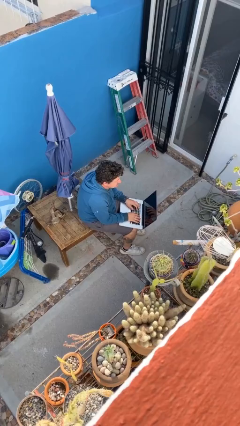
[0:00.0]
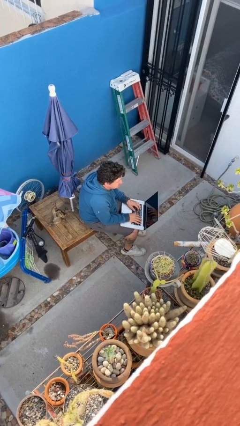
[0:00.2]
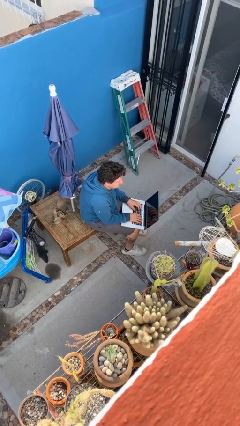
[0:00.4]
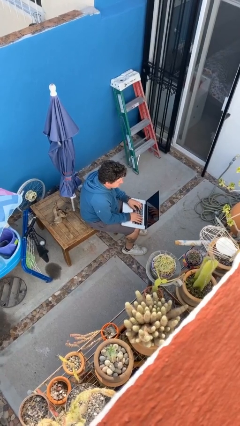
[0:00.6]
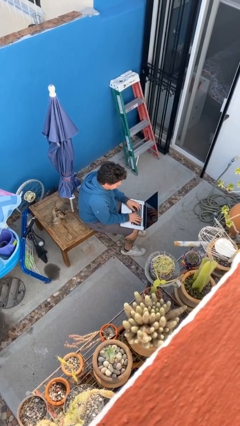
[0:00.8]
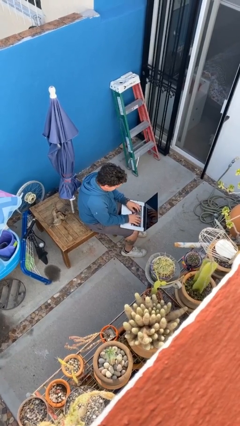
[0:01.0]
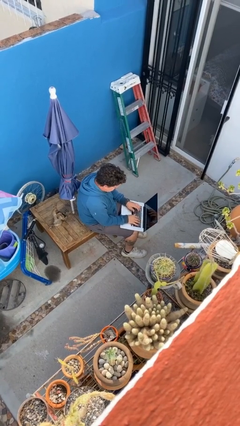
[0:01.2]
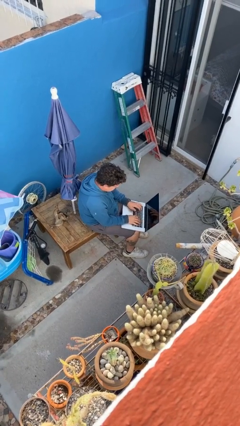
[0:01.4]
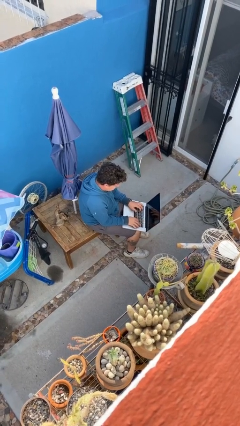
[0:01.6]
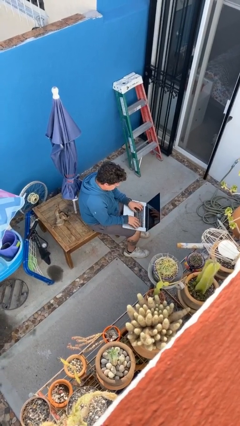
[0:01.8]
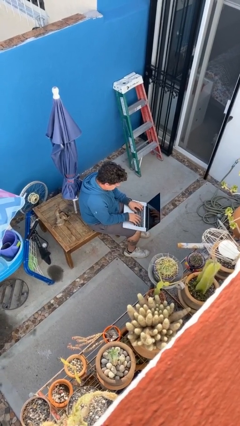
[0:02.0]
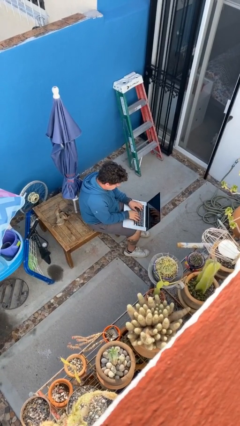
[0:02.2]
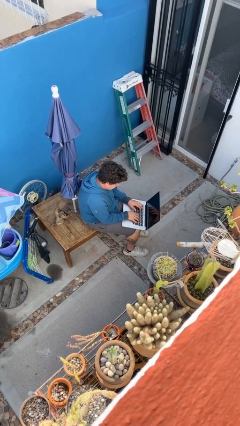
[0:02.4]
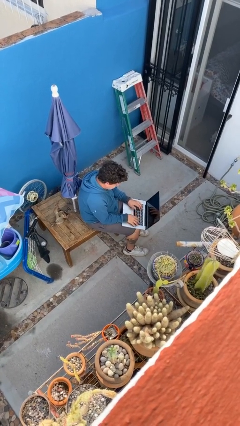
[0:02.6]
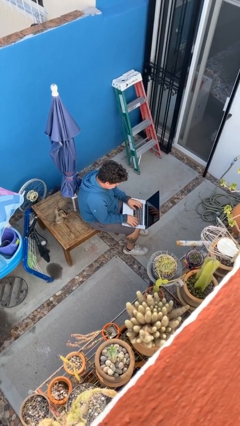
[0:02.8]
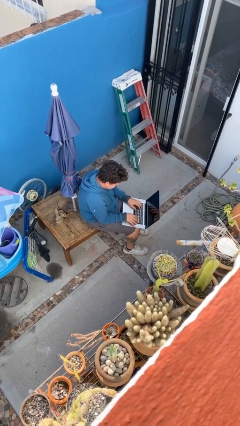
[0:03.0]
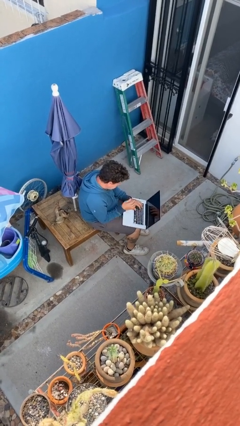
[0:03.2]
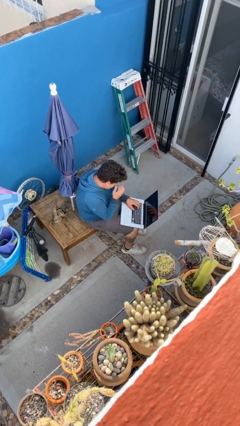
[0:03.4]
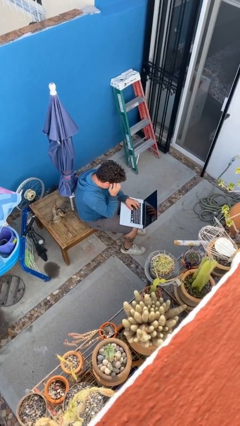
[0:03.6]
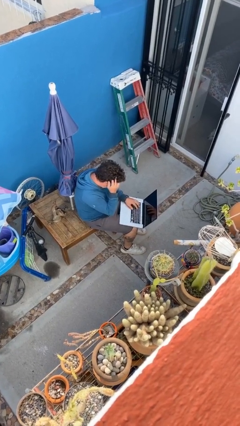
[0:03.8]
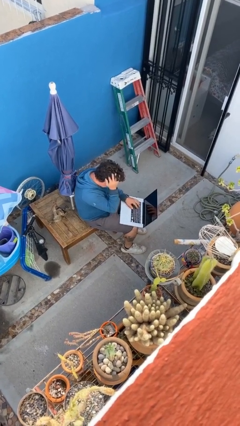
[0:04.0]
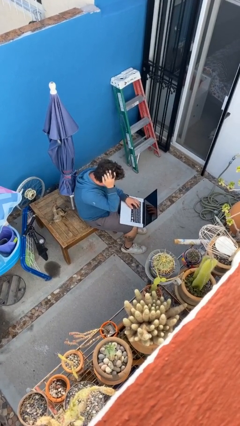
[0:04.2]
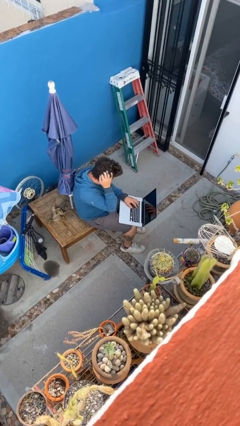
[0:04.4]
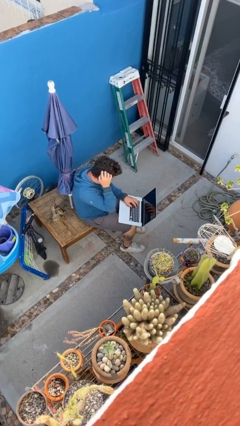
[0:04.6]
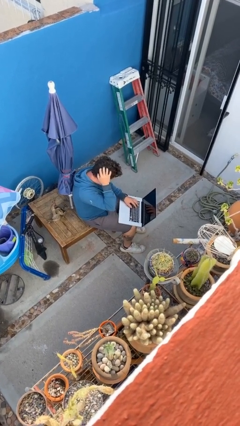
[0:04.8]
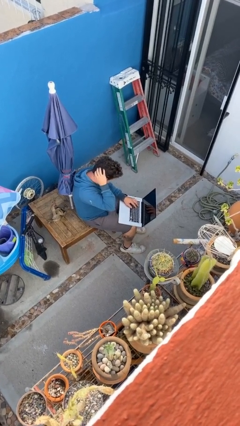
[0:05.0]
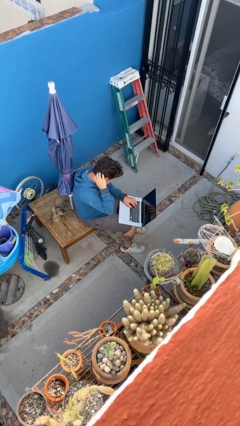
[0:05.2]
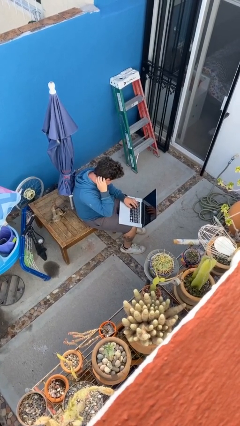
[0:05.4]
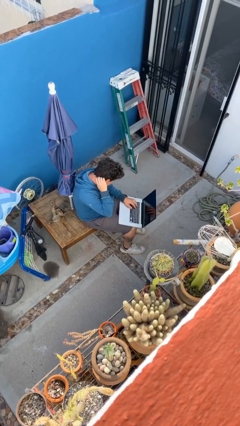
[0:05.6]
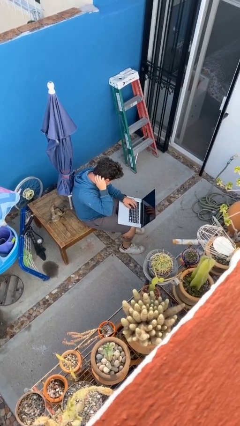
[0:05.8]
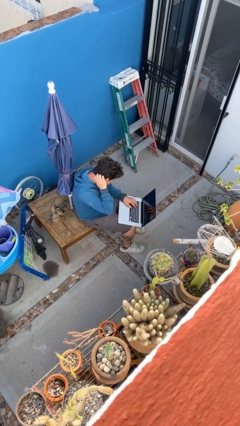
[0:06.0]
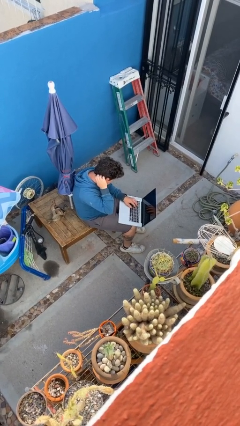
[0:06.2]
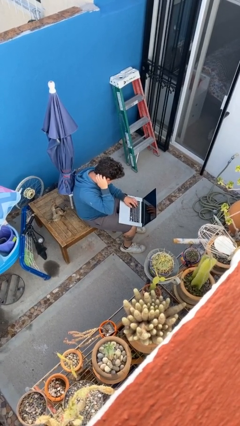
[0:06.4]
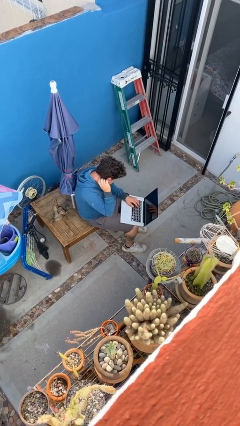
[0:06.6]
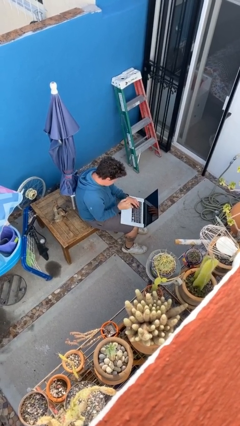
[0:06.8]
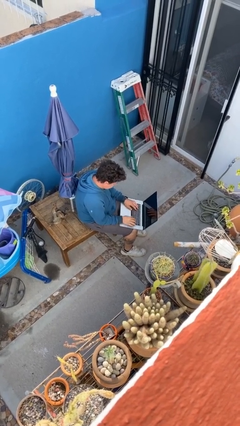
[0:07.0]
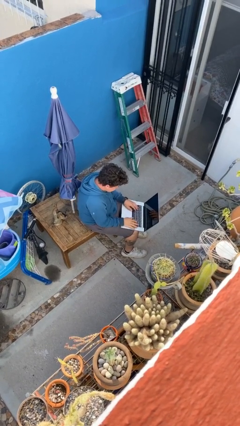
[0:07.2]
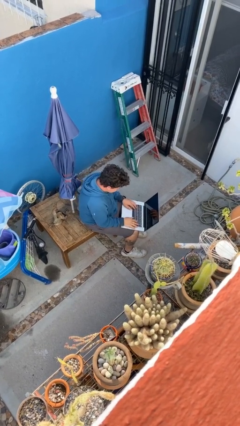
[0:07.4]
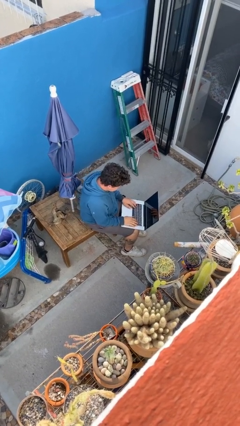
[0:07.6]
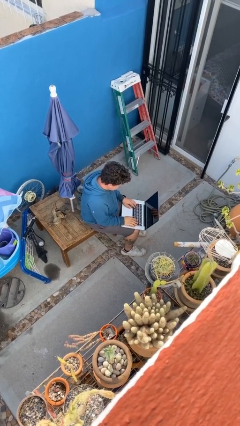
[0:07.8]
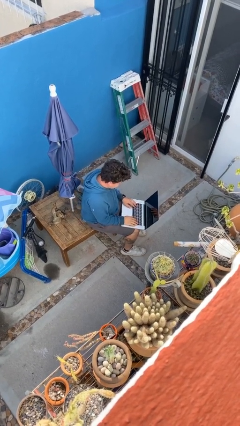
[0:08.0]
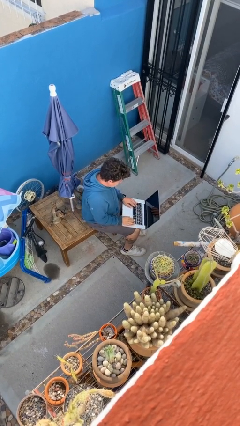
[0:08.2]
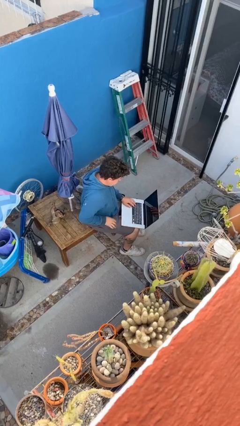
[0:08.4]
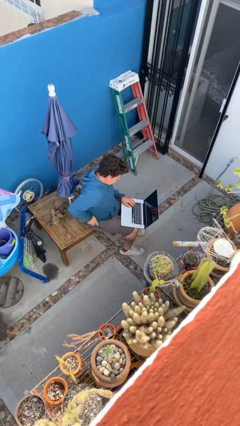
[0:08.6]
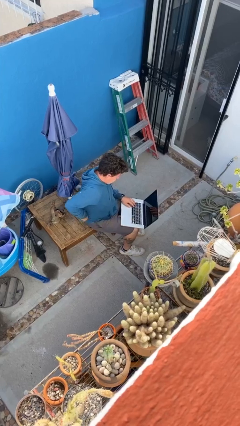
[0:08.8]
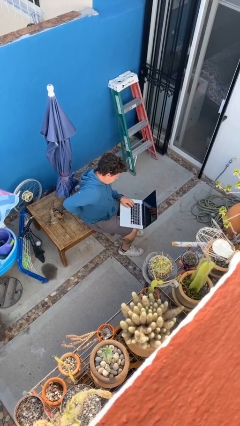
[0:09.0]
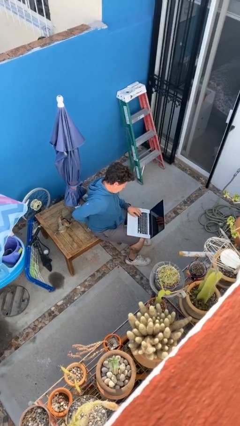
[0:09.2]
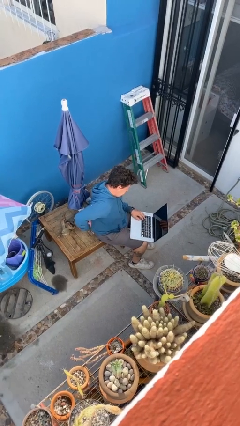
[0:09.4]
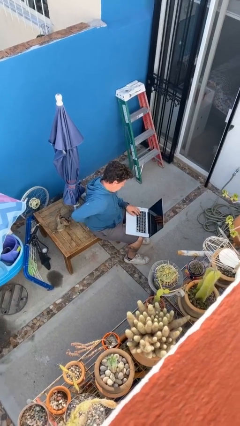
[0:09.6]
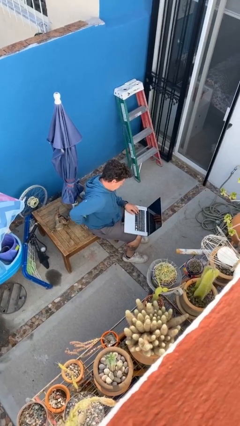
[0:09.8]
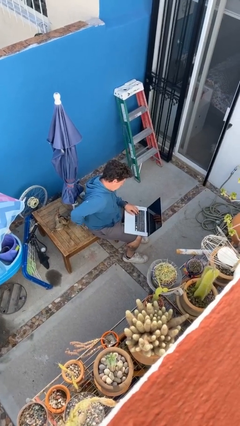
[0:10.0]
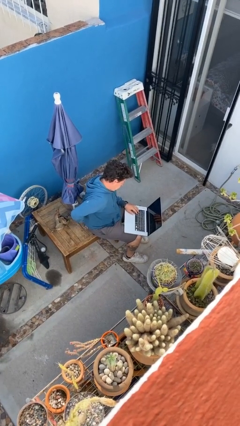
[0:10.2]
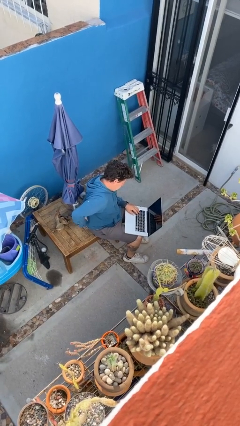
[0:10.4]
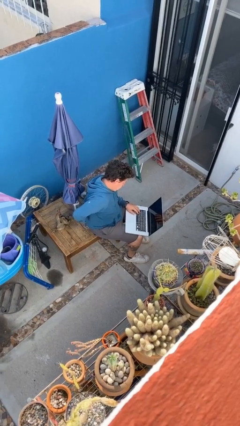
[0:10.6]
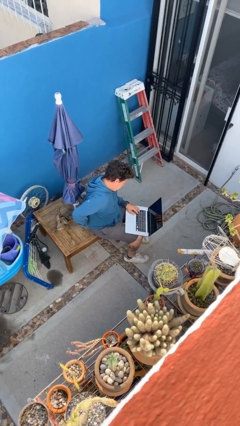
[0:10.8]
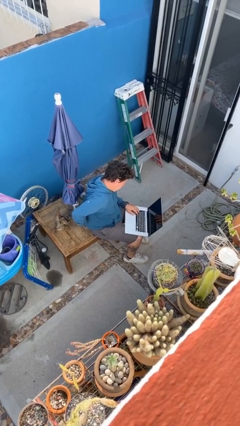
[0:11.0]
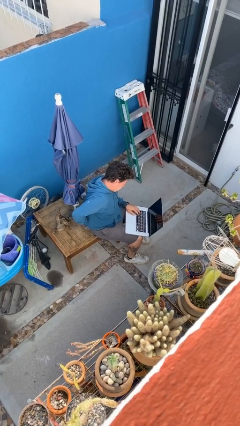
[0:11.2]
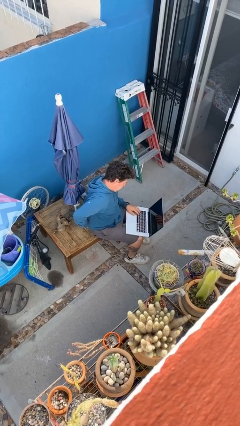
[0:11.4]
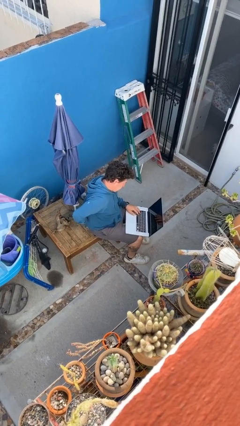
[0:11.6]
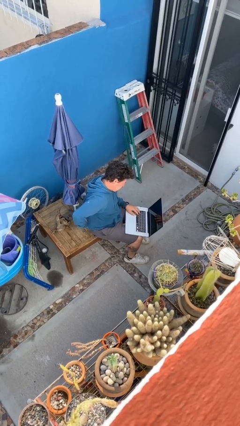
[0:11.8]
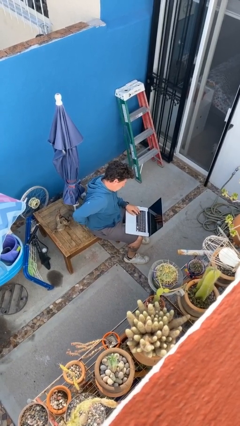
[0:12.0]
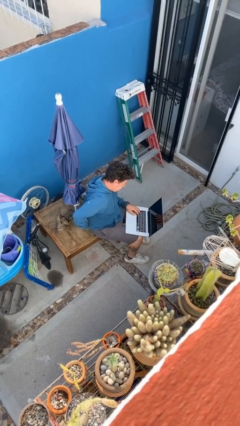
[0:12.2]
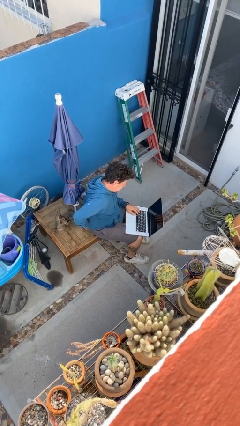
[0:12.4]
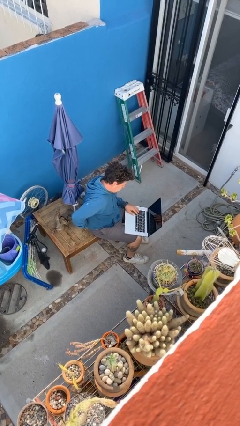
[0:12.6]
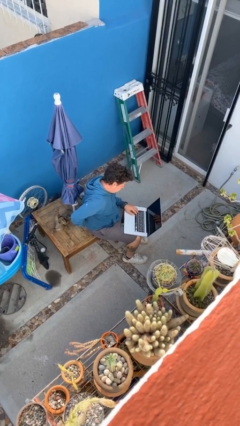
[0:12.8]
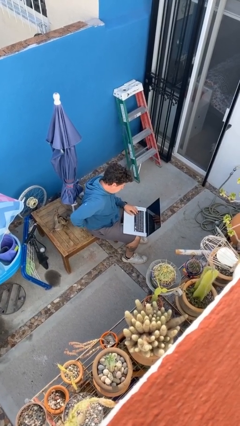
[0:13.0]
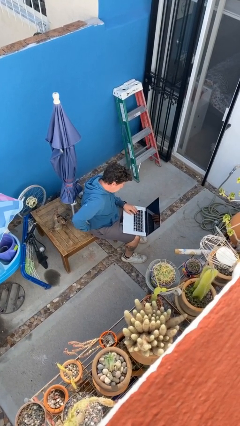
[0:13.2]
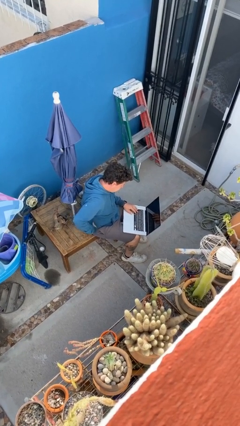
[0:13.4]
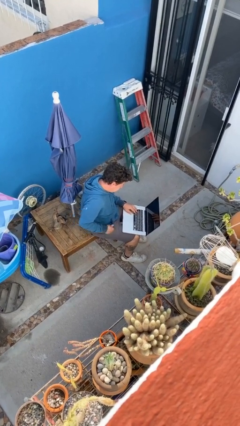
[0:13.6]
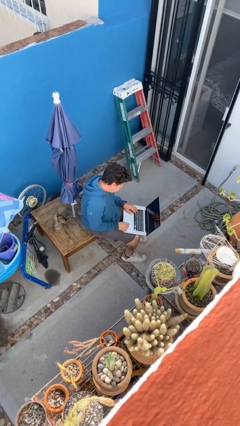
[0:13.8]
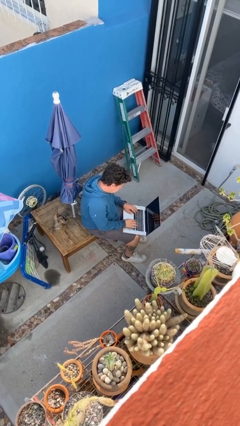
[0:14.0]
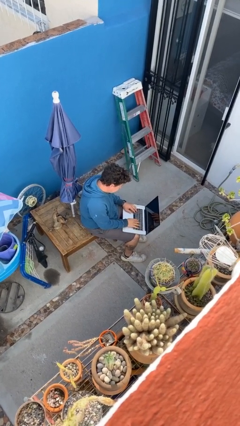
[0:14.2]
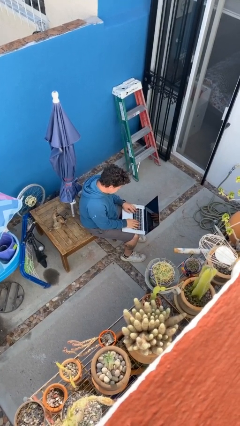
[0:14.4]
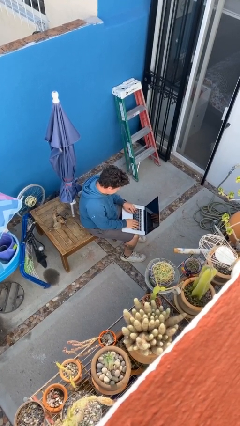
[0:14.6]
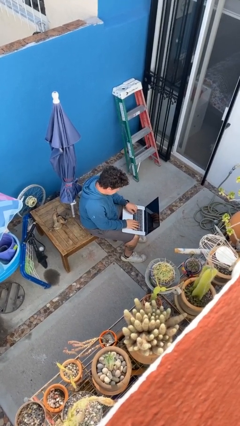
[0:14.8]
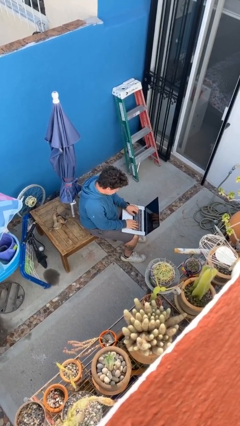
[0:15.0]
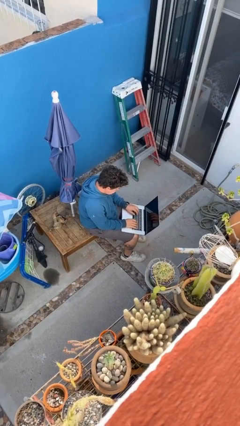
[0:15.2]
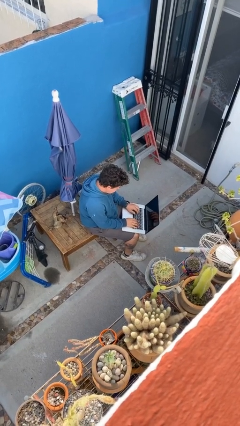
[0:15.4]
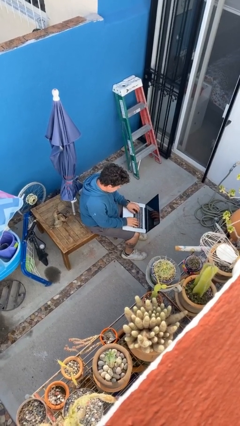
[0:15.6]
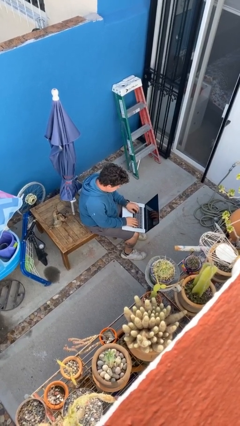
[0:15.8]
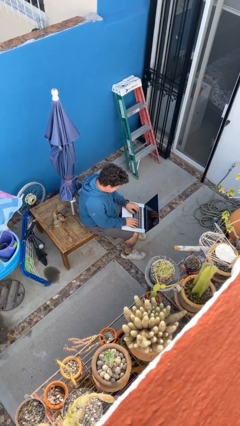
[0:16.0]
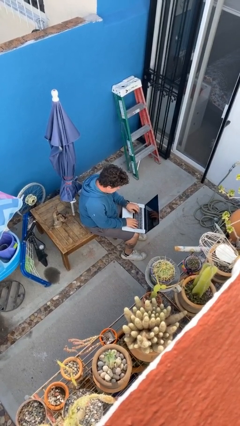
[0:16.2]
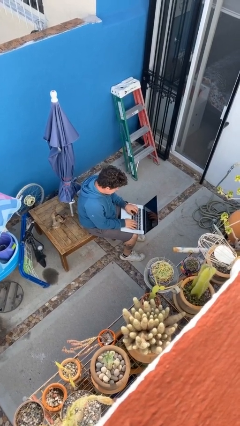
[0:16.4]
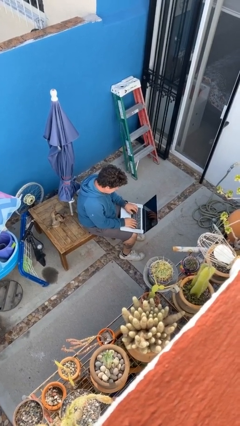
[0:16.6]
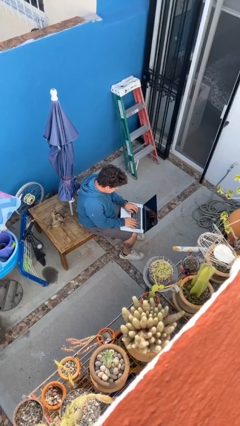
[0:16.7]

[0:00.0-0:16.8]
person interacts with laptop

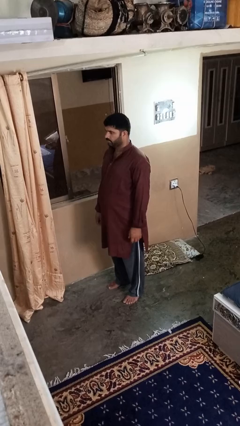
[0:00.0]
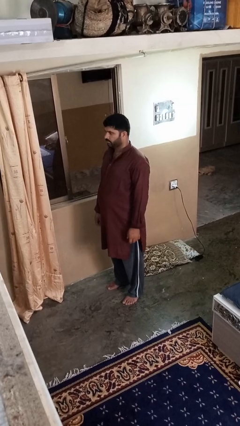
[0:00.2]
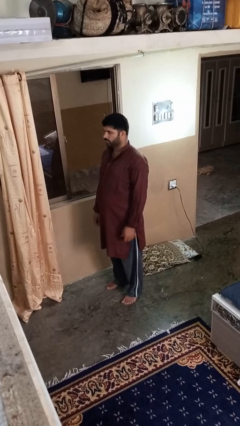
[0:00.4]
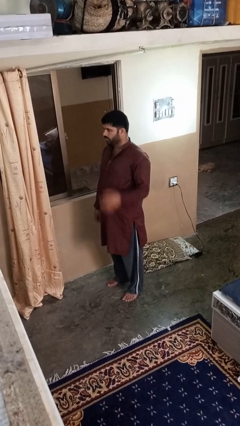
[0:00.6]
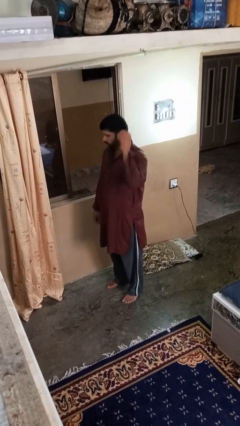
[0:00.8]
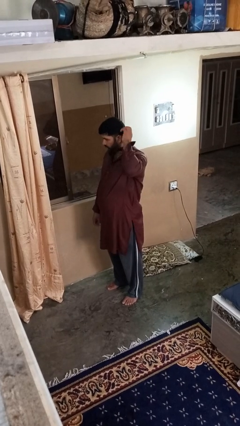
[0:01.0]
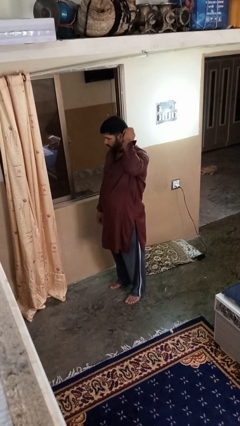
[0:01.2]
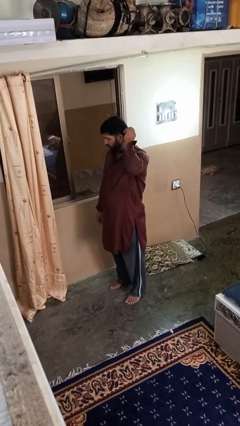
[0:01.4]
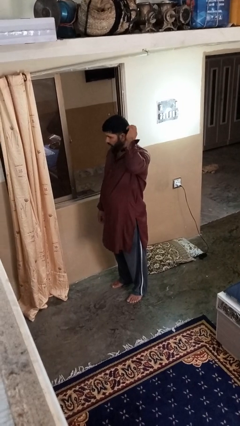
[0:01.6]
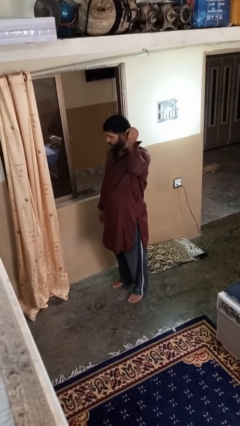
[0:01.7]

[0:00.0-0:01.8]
person strokes hair
